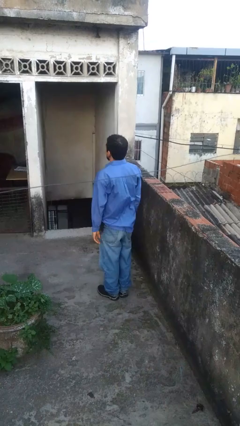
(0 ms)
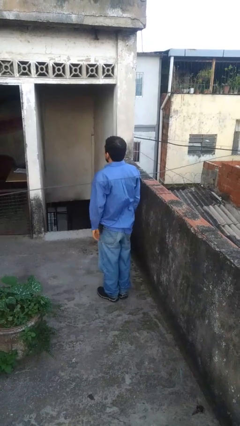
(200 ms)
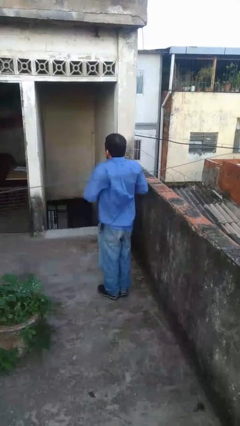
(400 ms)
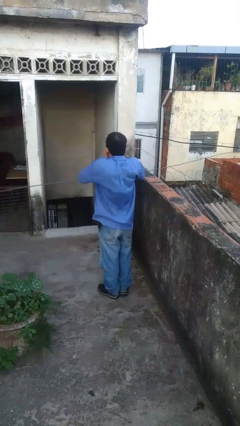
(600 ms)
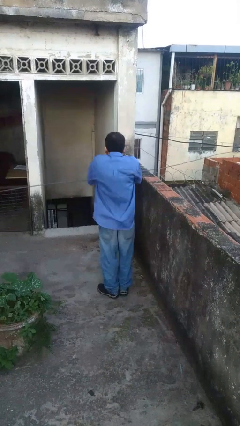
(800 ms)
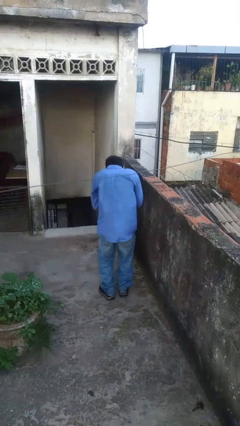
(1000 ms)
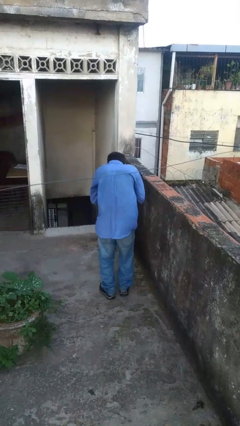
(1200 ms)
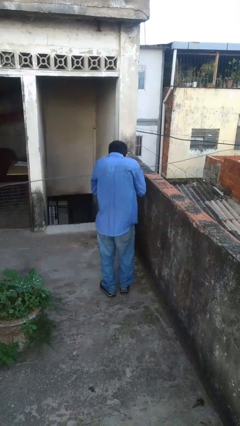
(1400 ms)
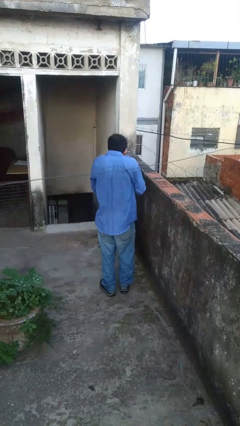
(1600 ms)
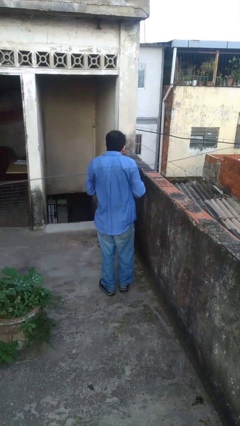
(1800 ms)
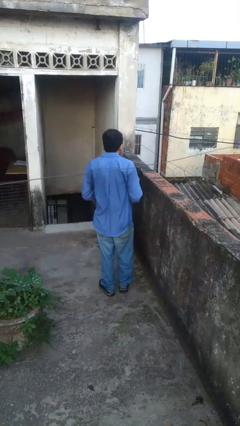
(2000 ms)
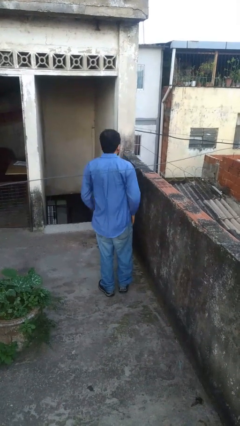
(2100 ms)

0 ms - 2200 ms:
person sneezes into hand

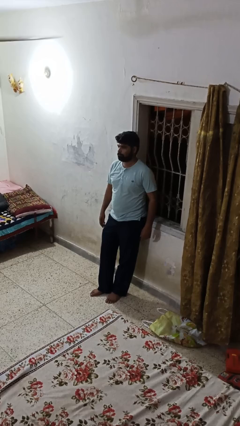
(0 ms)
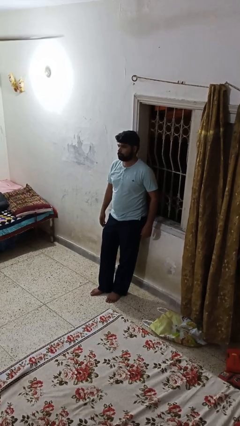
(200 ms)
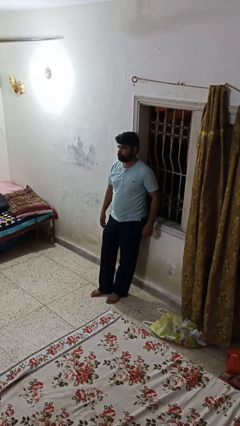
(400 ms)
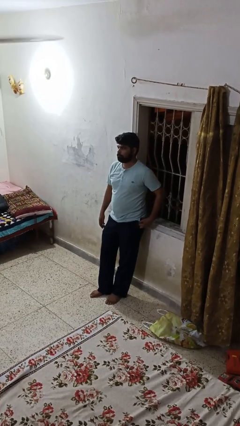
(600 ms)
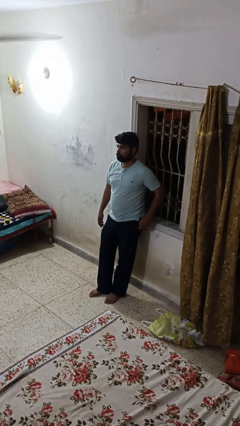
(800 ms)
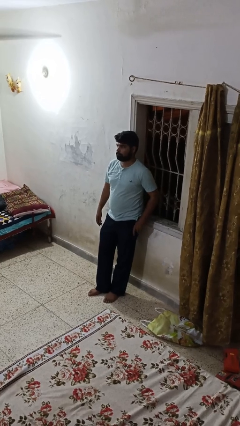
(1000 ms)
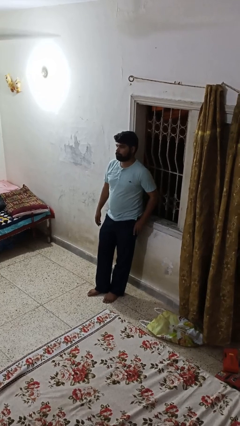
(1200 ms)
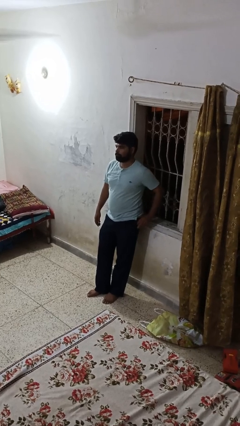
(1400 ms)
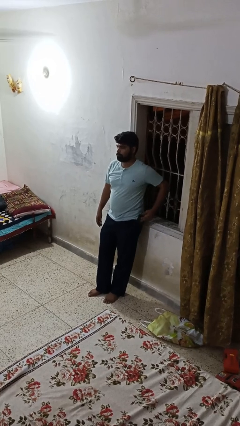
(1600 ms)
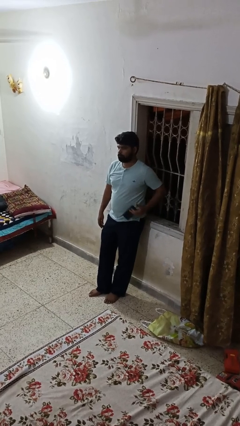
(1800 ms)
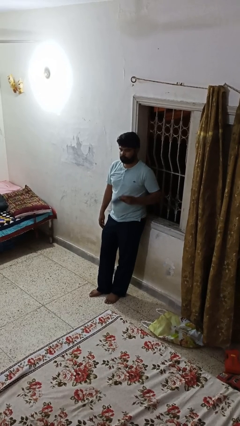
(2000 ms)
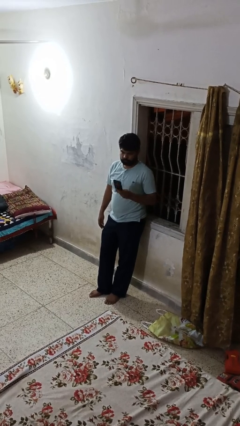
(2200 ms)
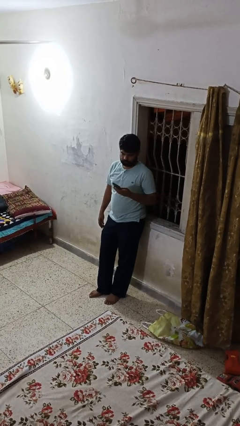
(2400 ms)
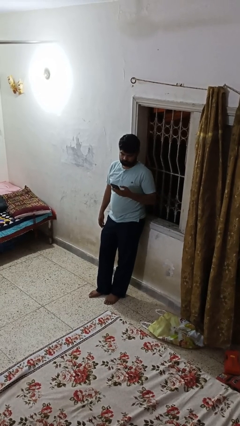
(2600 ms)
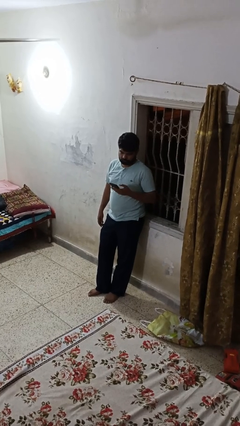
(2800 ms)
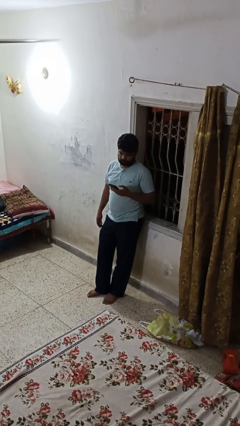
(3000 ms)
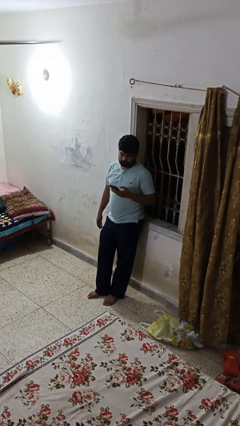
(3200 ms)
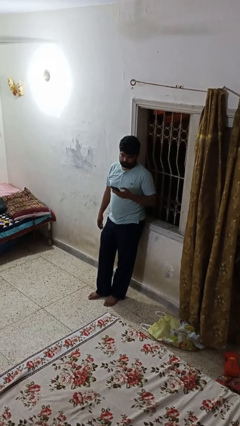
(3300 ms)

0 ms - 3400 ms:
person takes phone from pocket

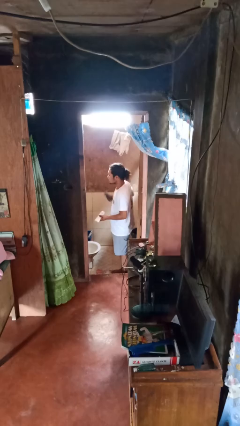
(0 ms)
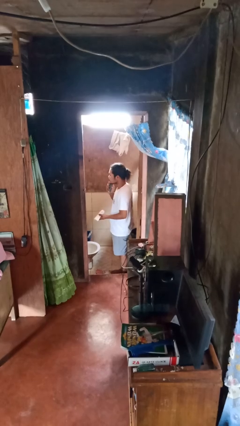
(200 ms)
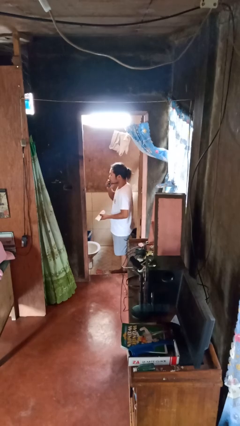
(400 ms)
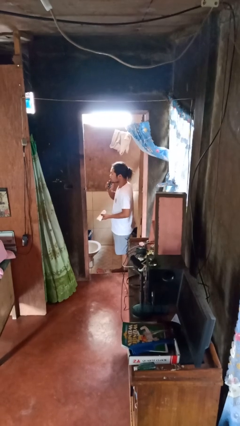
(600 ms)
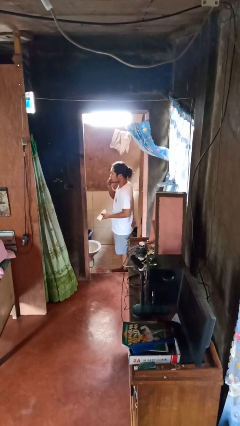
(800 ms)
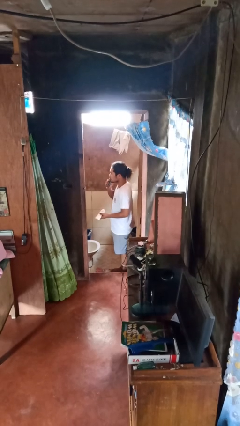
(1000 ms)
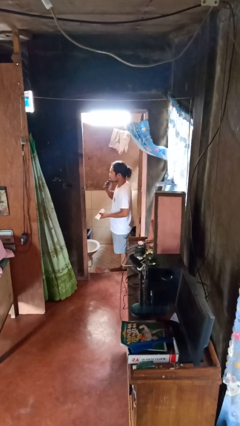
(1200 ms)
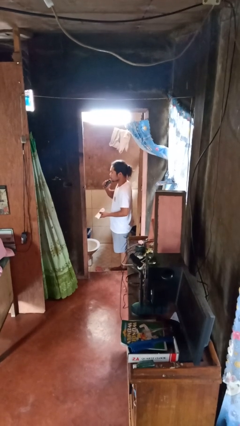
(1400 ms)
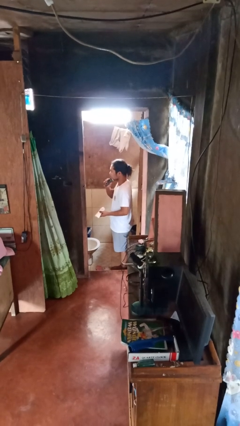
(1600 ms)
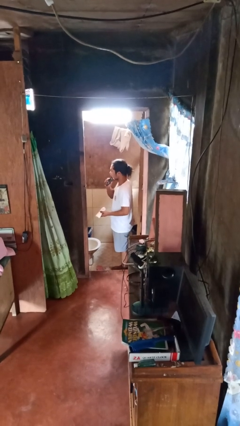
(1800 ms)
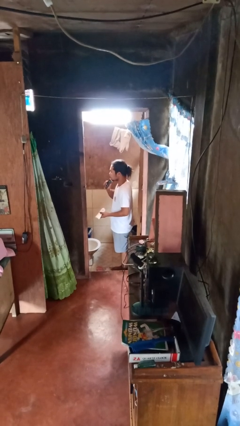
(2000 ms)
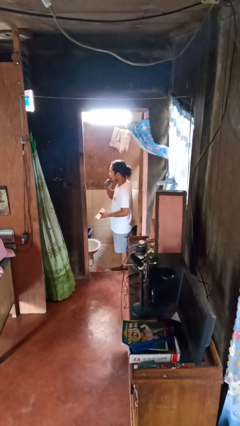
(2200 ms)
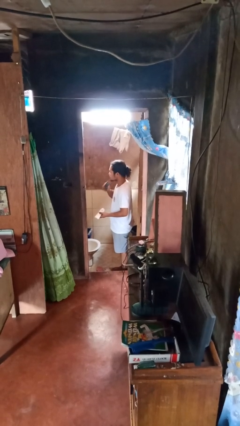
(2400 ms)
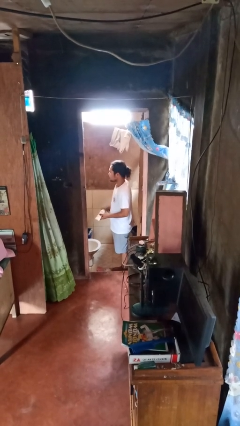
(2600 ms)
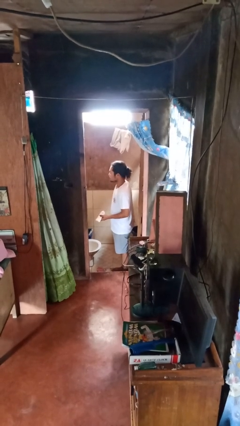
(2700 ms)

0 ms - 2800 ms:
person shaves face

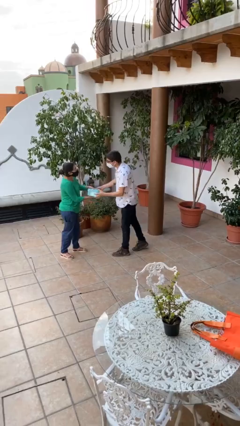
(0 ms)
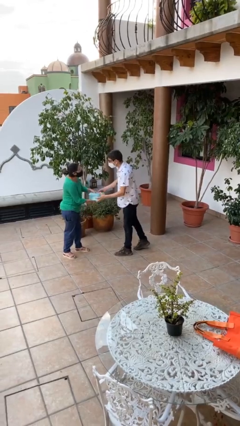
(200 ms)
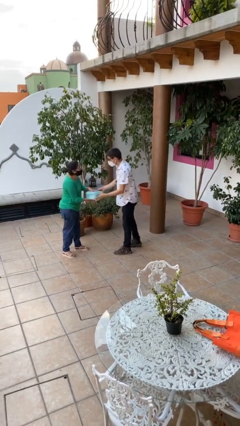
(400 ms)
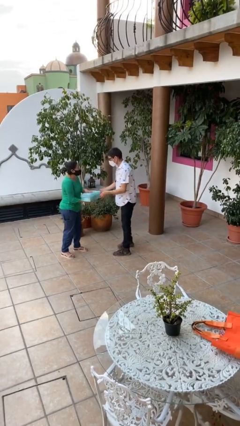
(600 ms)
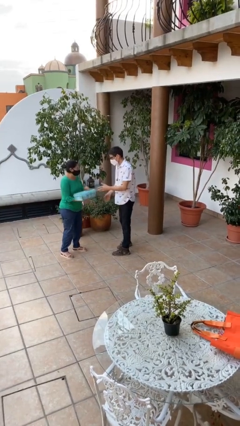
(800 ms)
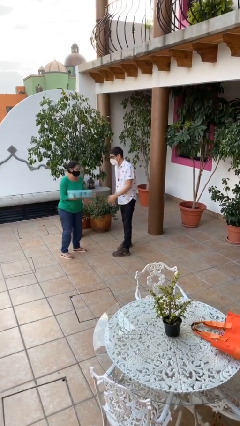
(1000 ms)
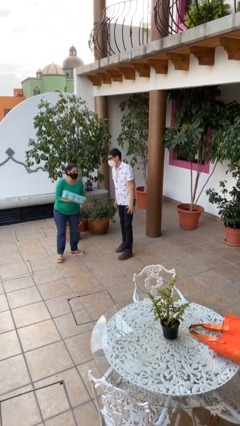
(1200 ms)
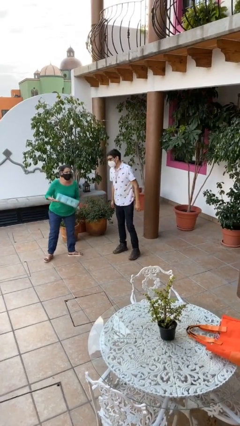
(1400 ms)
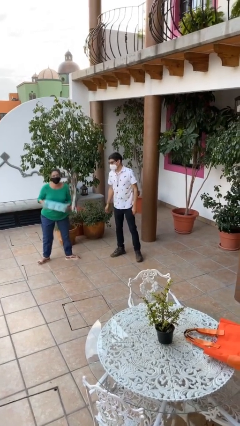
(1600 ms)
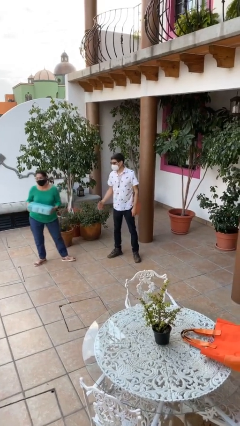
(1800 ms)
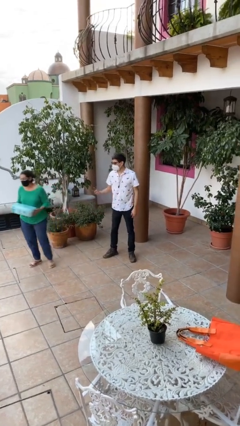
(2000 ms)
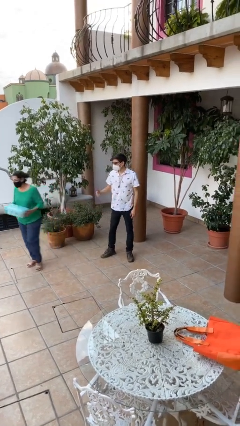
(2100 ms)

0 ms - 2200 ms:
person transfers object to person

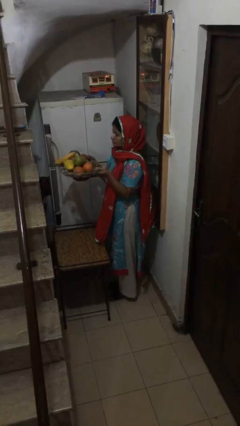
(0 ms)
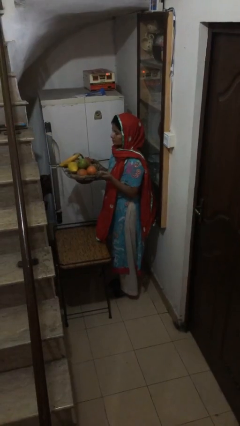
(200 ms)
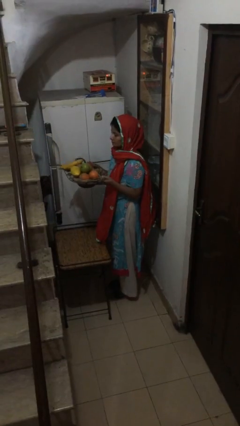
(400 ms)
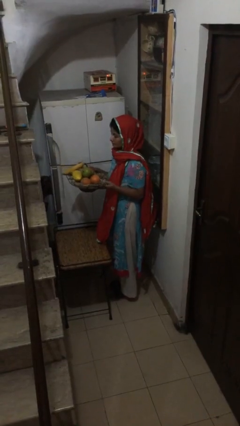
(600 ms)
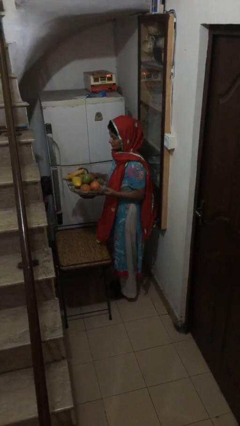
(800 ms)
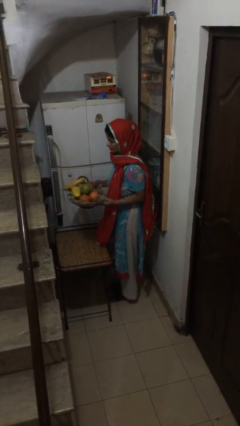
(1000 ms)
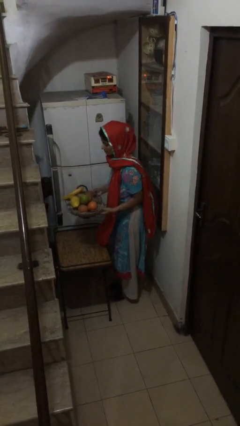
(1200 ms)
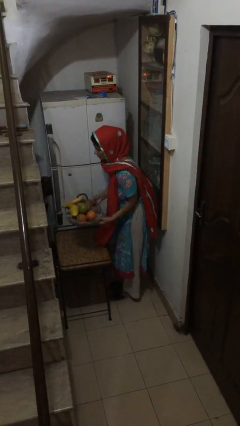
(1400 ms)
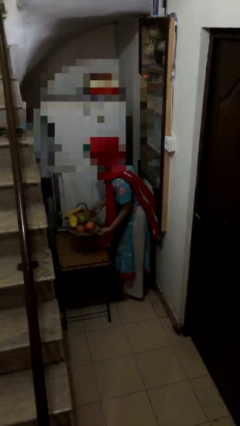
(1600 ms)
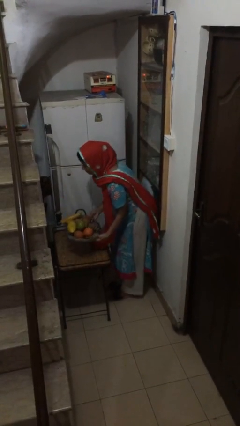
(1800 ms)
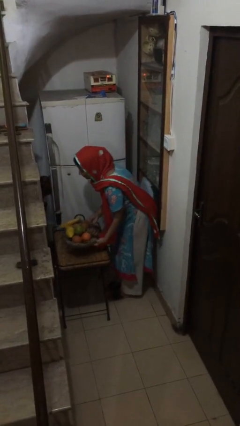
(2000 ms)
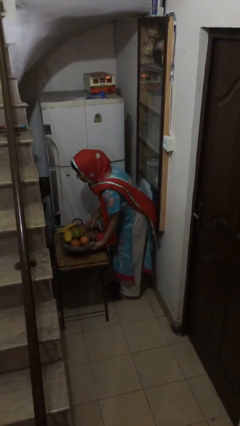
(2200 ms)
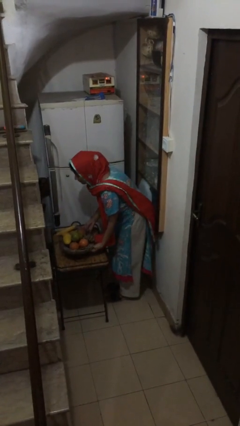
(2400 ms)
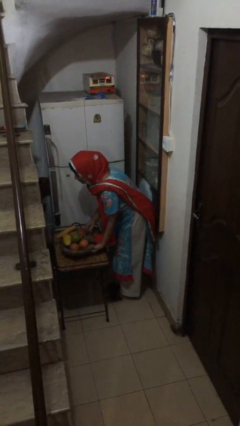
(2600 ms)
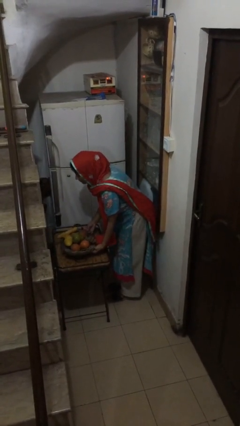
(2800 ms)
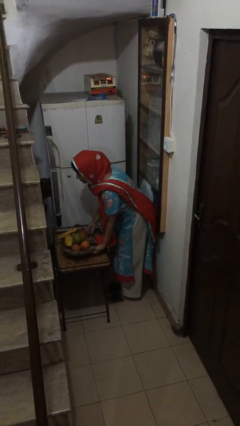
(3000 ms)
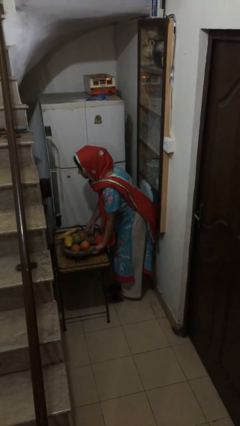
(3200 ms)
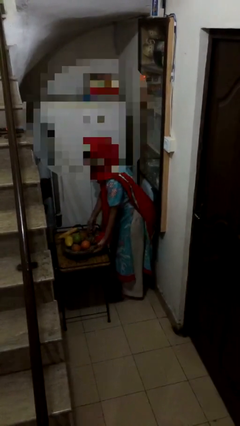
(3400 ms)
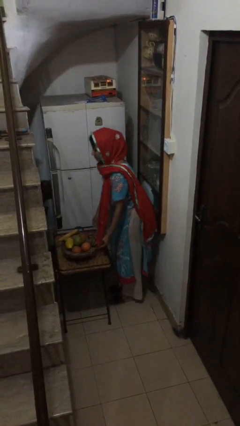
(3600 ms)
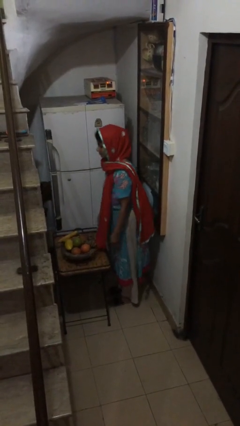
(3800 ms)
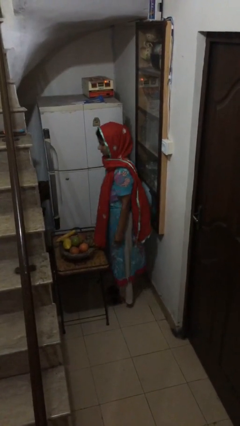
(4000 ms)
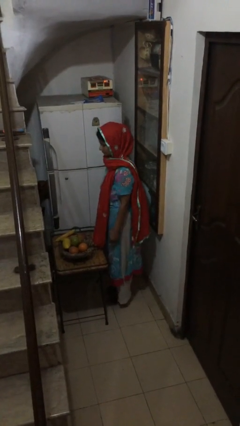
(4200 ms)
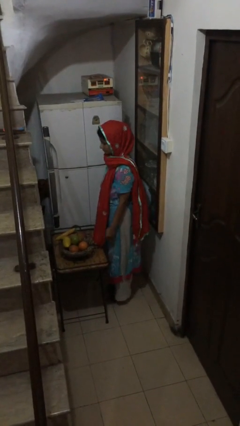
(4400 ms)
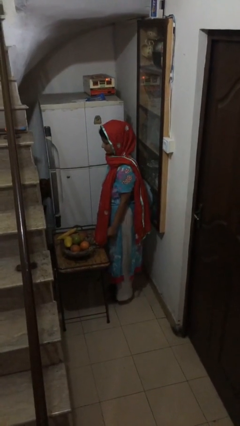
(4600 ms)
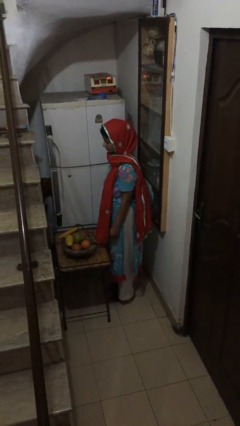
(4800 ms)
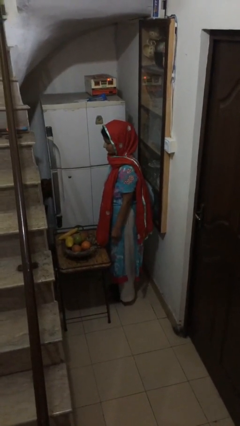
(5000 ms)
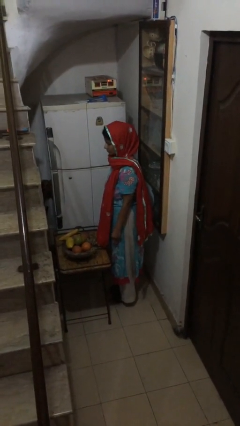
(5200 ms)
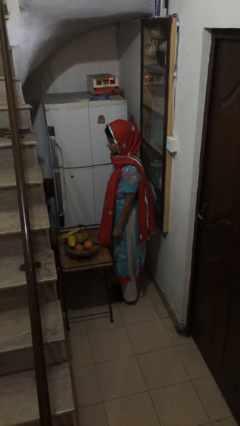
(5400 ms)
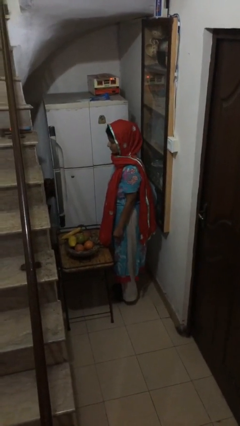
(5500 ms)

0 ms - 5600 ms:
person puts down object on table

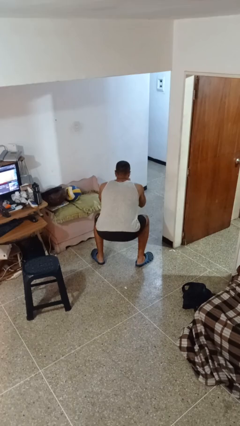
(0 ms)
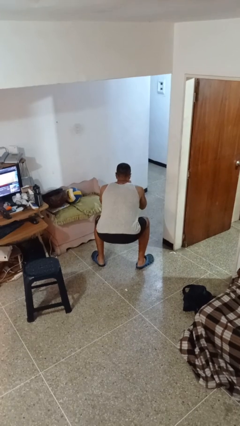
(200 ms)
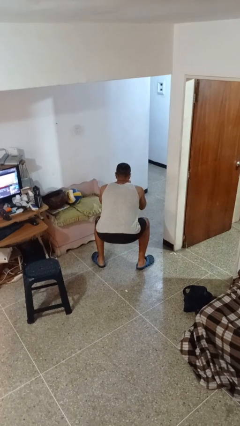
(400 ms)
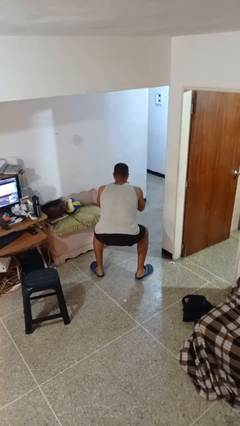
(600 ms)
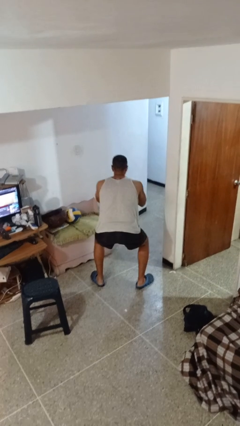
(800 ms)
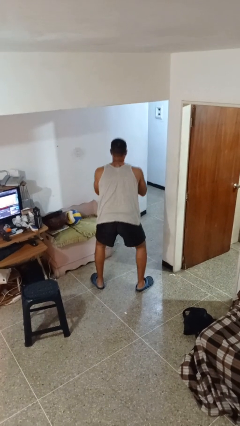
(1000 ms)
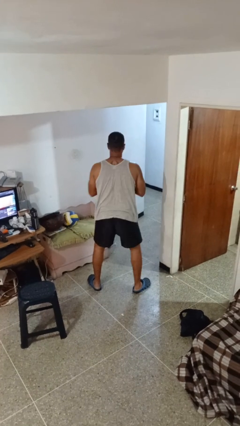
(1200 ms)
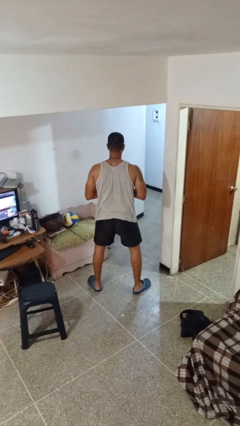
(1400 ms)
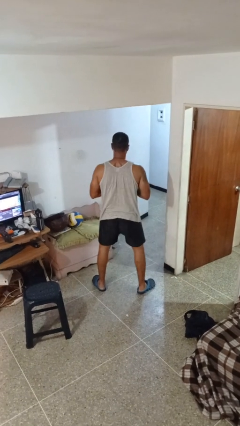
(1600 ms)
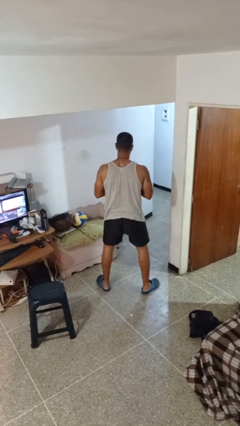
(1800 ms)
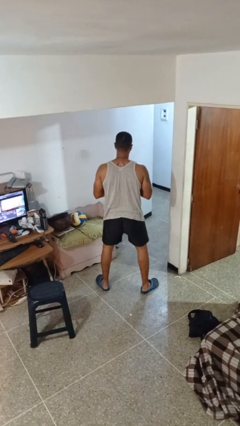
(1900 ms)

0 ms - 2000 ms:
person stands up
